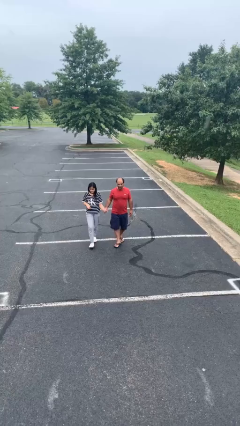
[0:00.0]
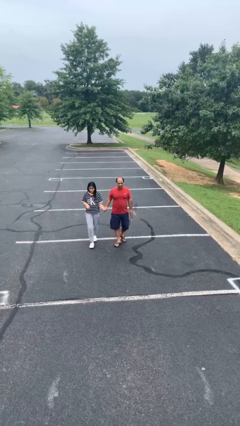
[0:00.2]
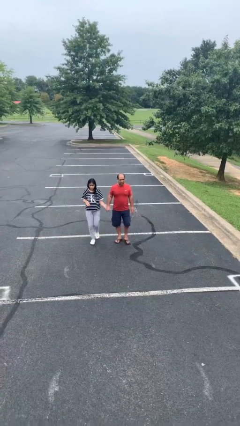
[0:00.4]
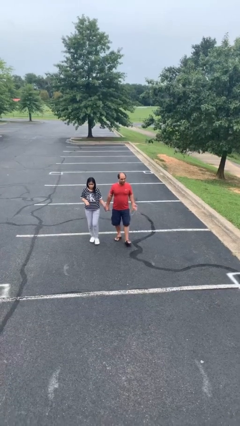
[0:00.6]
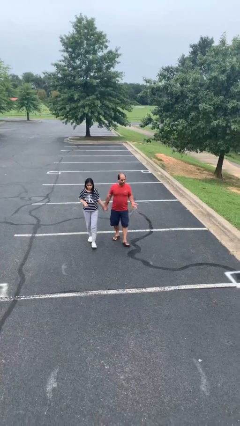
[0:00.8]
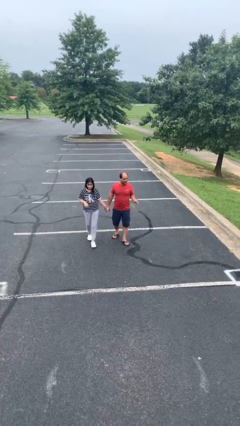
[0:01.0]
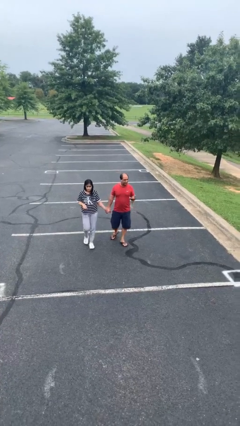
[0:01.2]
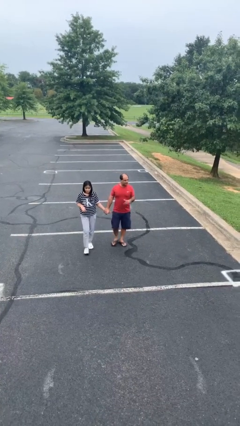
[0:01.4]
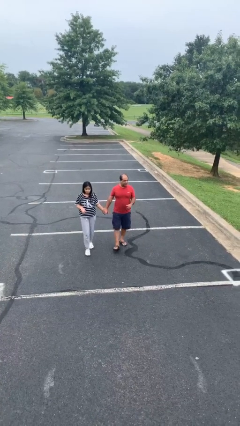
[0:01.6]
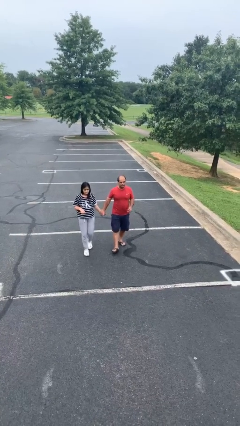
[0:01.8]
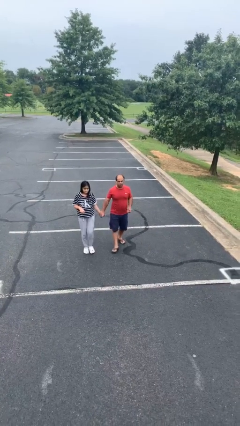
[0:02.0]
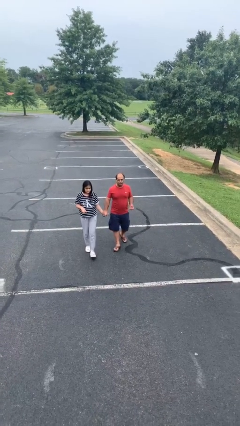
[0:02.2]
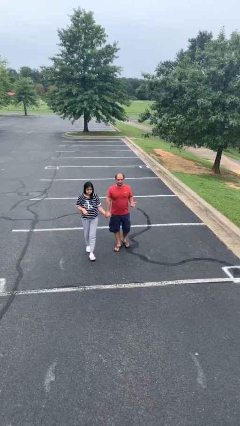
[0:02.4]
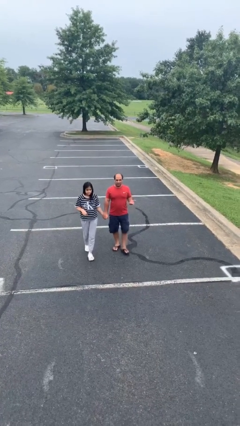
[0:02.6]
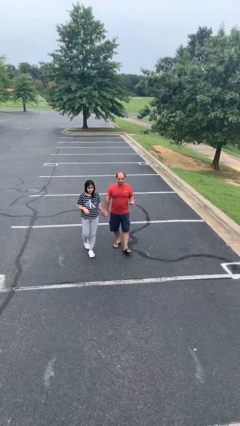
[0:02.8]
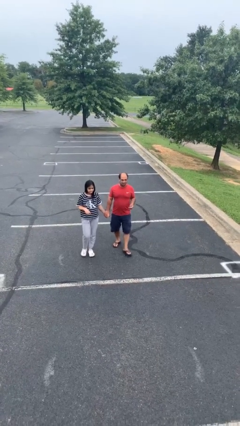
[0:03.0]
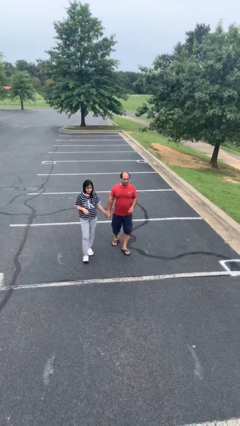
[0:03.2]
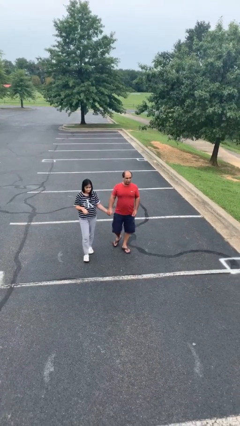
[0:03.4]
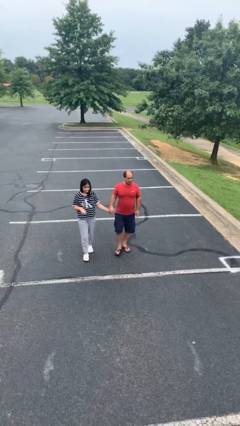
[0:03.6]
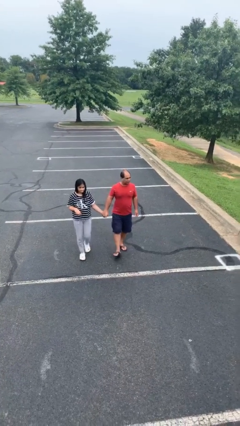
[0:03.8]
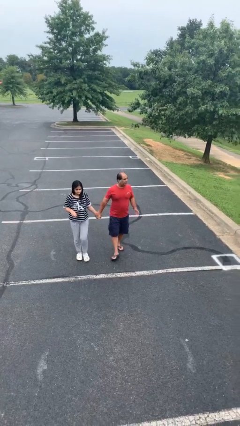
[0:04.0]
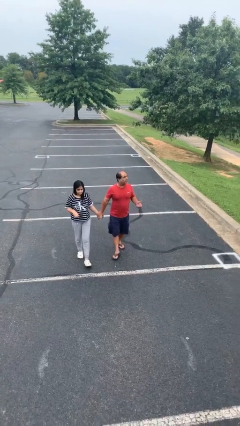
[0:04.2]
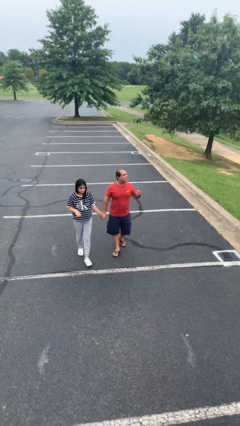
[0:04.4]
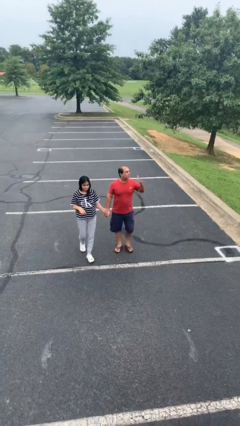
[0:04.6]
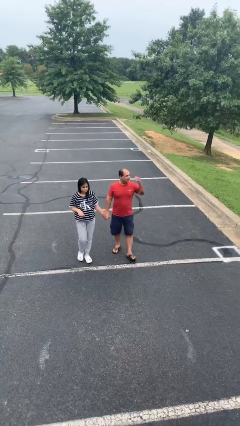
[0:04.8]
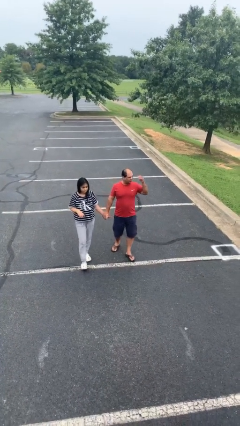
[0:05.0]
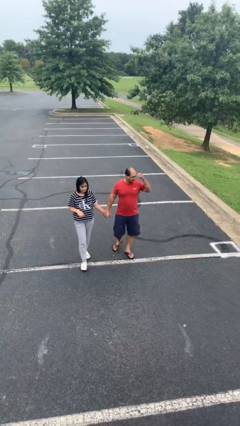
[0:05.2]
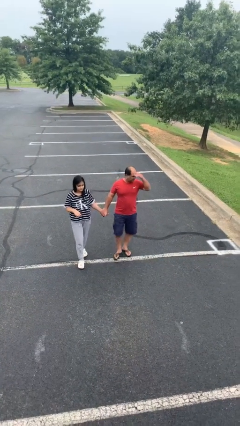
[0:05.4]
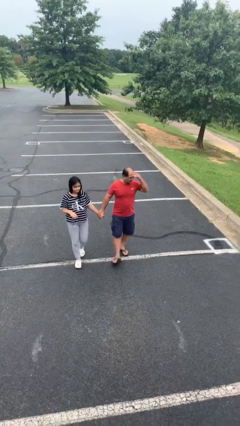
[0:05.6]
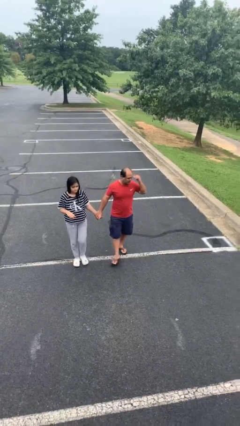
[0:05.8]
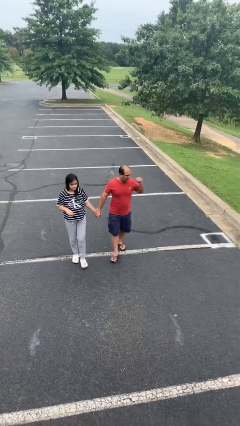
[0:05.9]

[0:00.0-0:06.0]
person holds hand

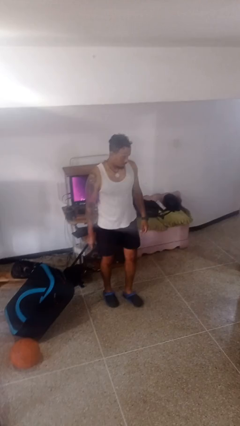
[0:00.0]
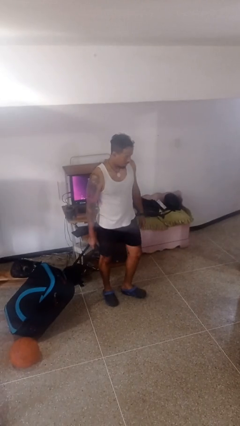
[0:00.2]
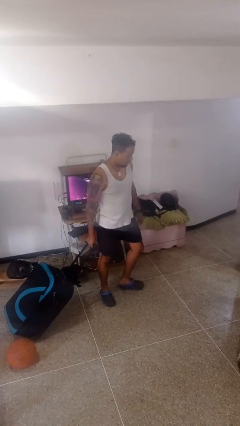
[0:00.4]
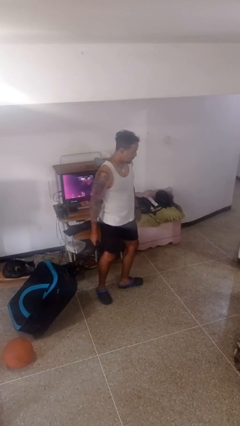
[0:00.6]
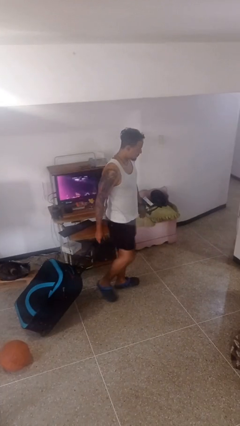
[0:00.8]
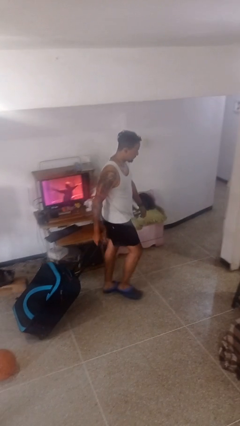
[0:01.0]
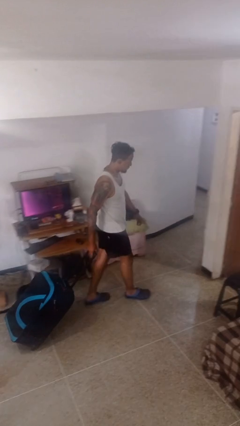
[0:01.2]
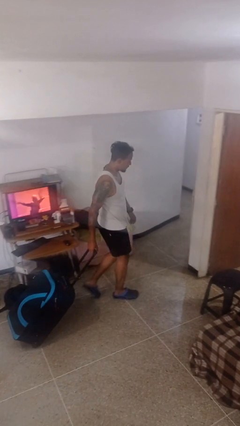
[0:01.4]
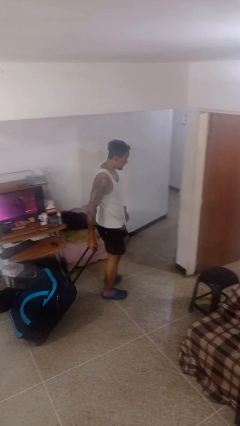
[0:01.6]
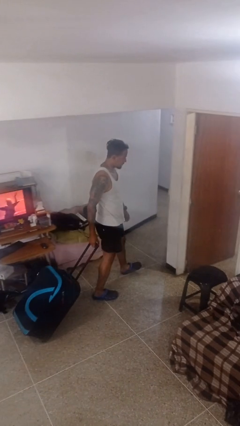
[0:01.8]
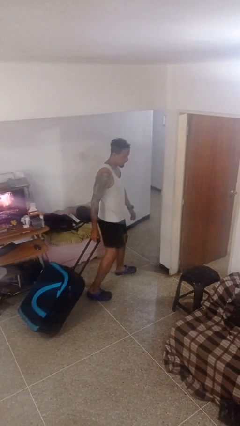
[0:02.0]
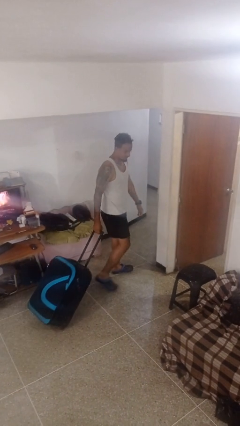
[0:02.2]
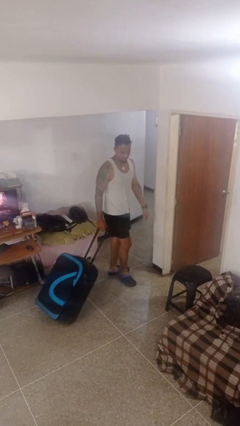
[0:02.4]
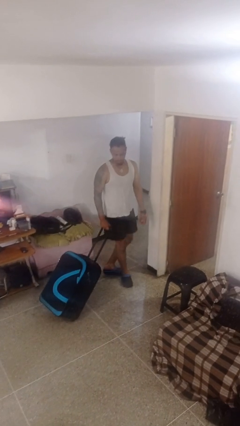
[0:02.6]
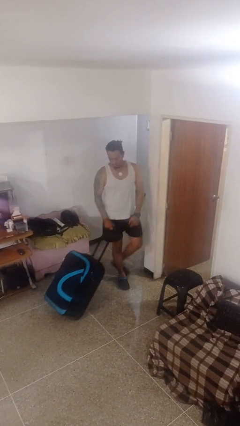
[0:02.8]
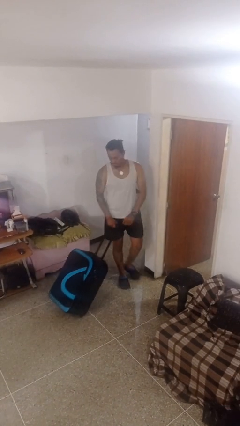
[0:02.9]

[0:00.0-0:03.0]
person pulls wheeled cart

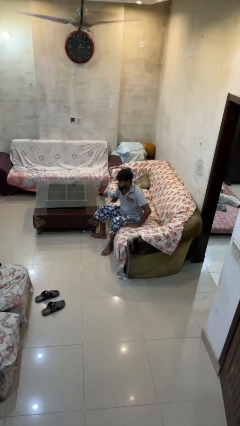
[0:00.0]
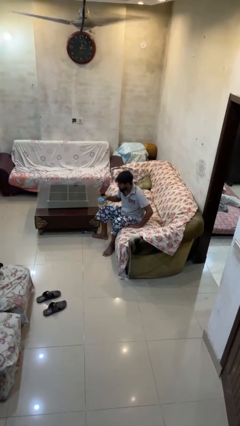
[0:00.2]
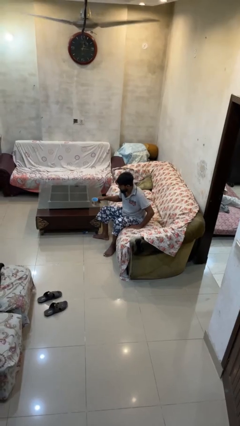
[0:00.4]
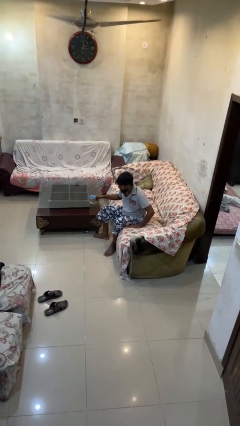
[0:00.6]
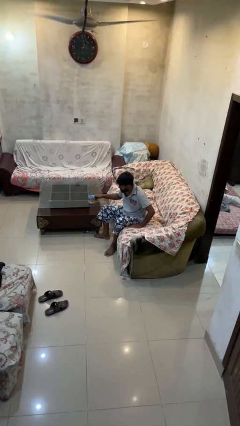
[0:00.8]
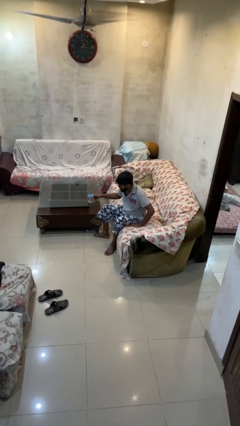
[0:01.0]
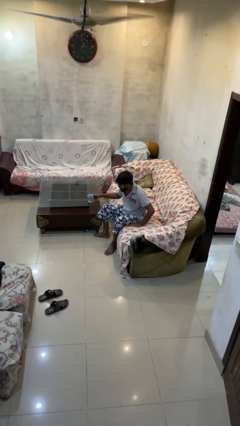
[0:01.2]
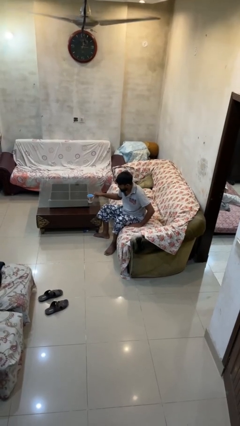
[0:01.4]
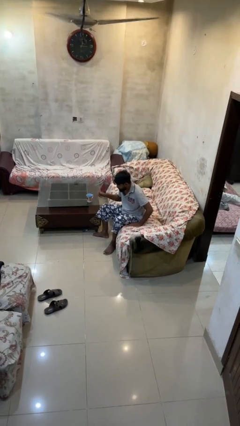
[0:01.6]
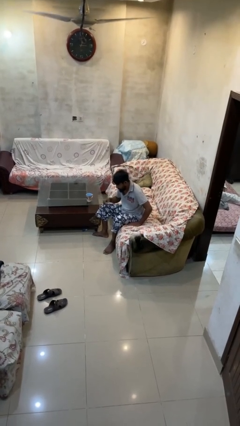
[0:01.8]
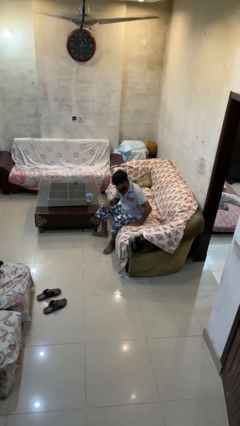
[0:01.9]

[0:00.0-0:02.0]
person puts down object on table

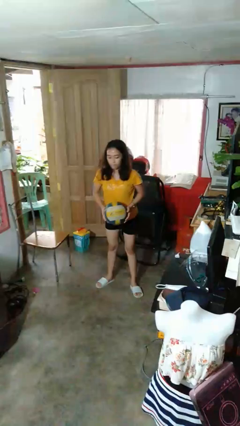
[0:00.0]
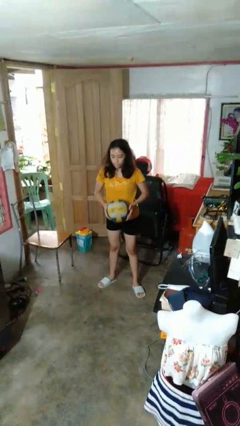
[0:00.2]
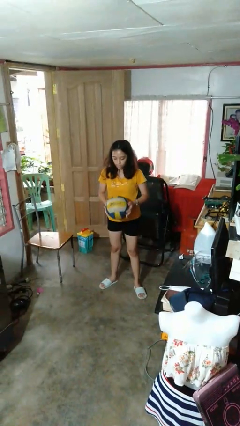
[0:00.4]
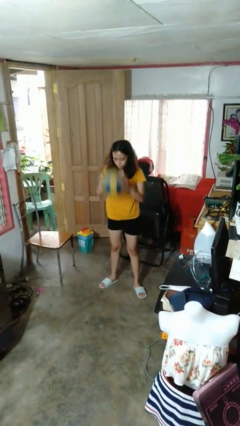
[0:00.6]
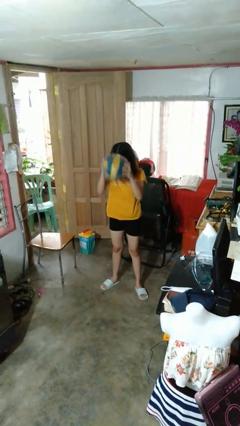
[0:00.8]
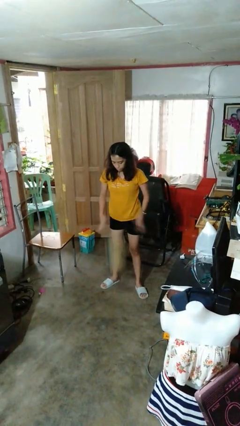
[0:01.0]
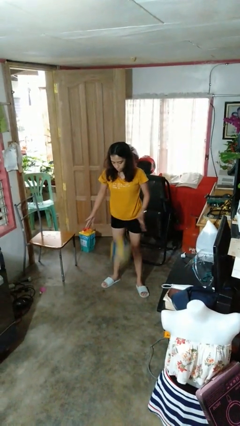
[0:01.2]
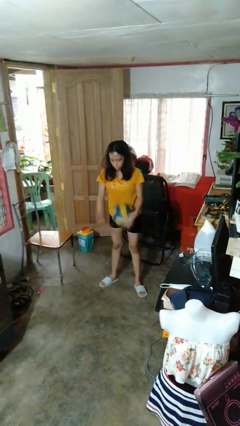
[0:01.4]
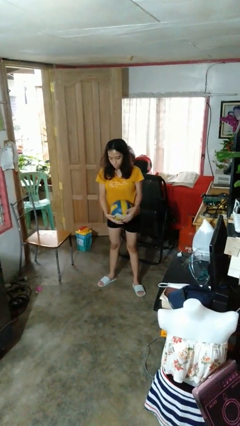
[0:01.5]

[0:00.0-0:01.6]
person bounces ball on floor

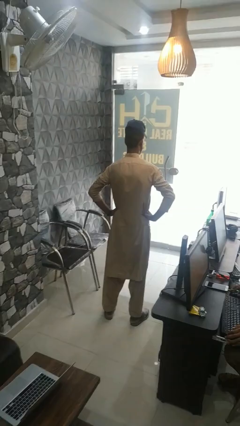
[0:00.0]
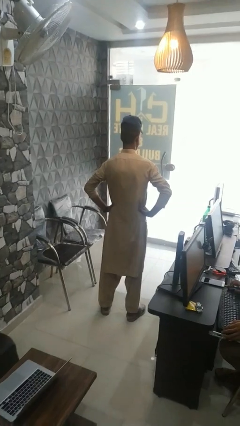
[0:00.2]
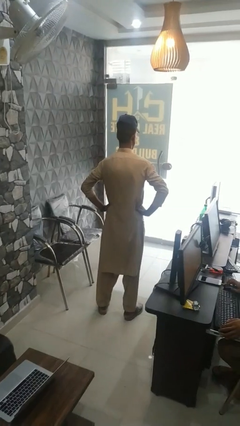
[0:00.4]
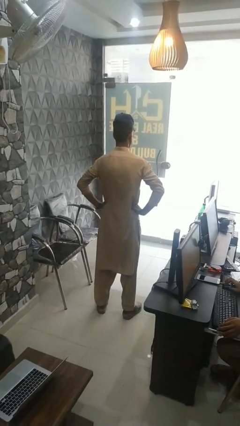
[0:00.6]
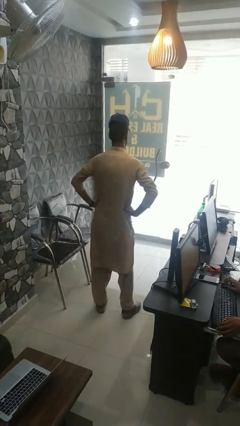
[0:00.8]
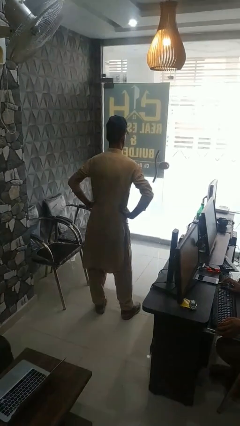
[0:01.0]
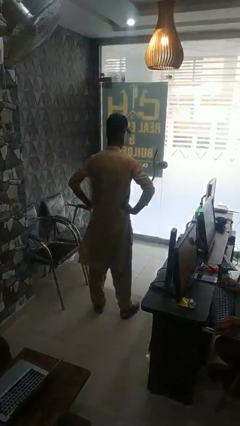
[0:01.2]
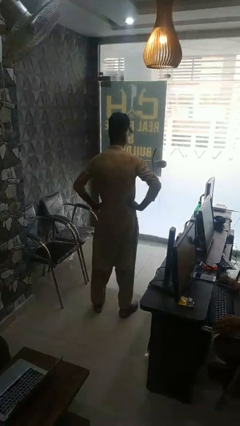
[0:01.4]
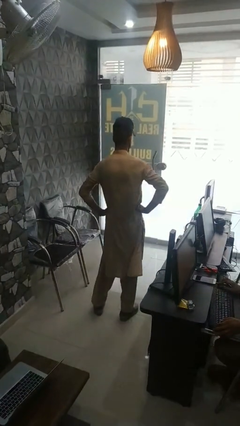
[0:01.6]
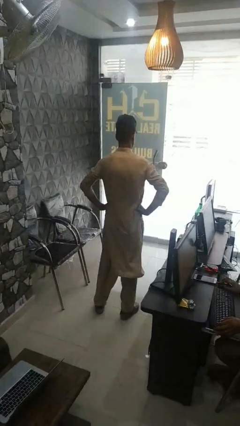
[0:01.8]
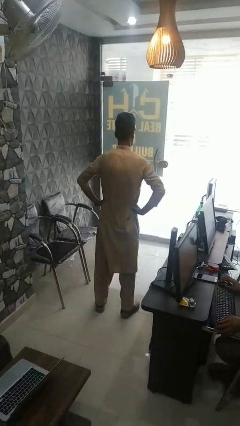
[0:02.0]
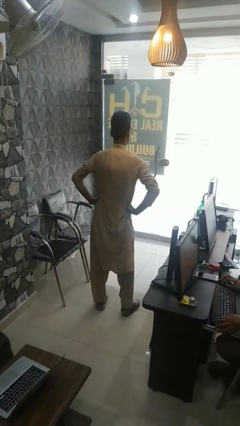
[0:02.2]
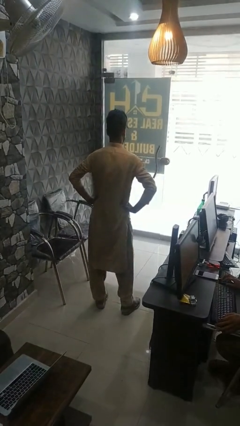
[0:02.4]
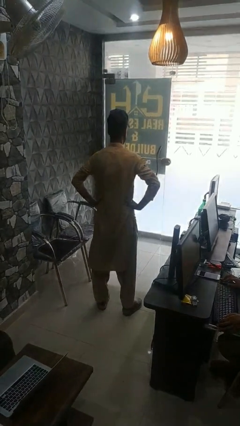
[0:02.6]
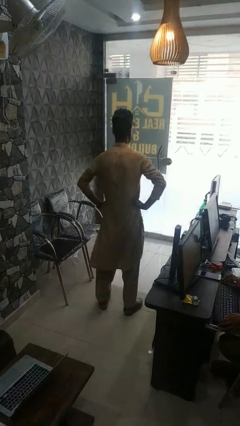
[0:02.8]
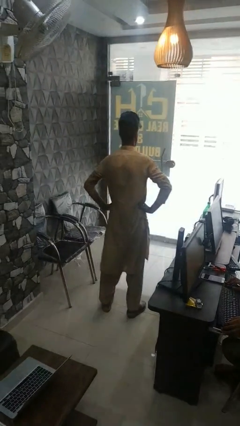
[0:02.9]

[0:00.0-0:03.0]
person wiggles hips

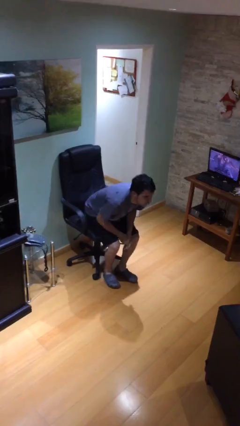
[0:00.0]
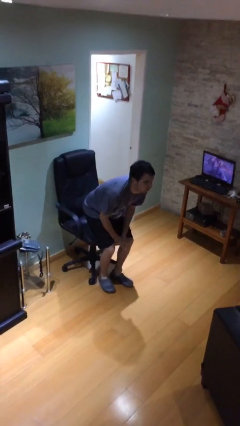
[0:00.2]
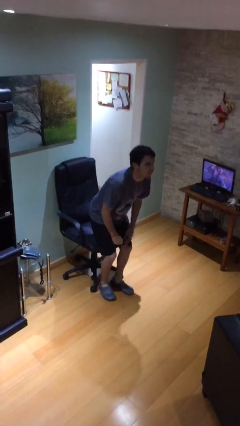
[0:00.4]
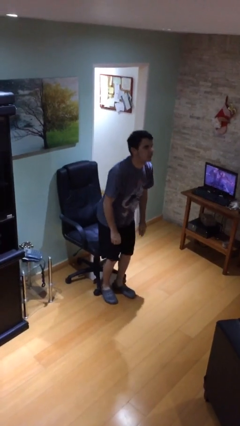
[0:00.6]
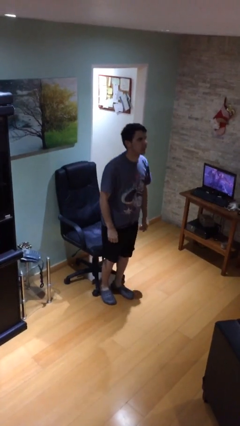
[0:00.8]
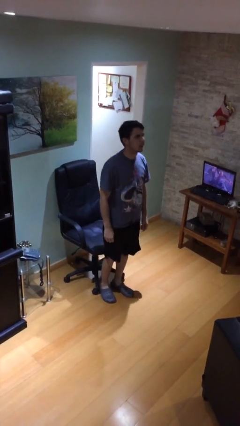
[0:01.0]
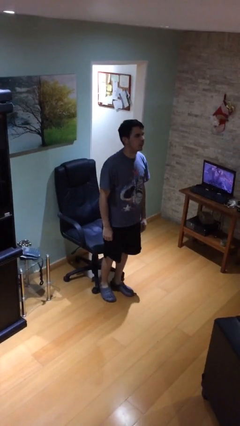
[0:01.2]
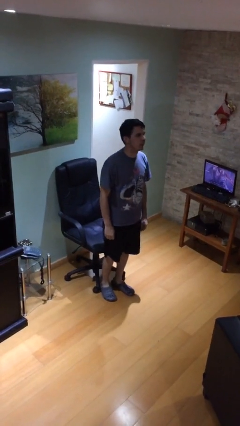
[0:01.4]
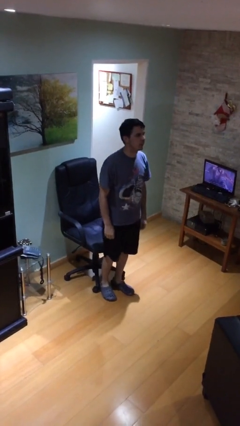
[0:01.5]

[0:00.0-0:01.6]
person stands up
